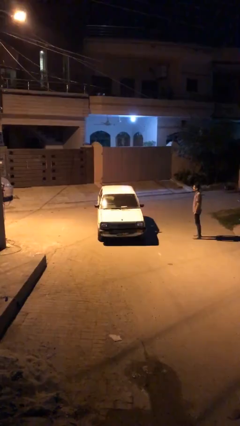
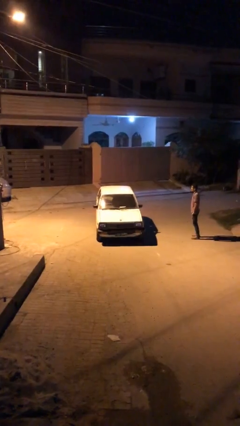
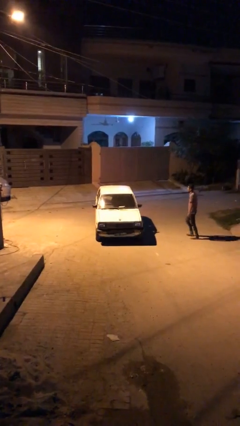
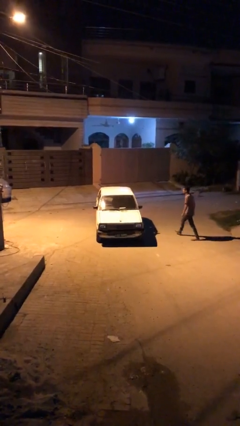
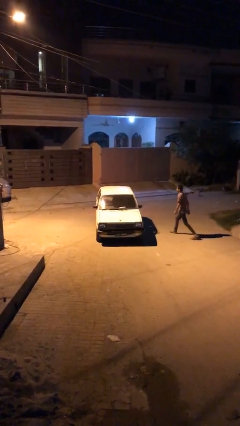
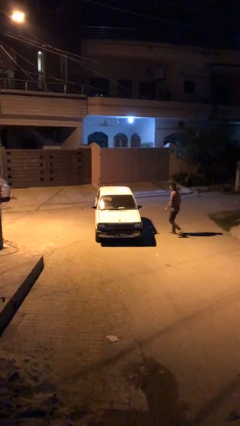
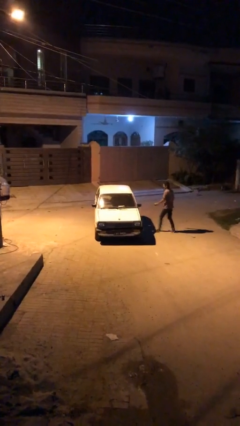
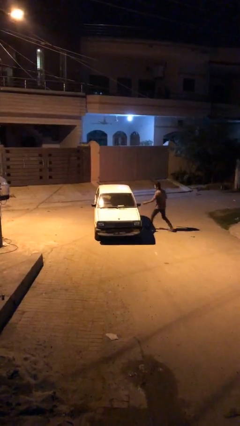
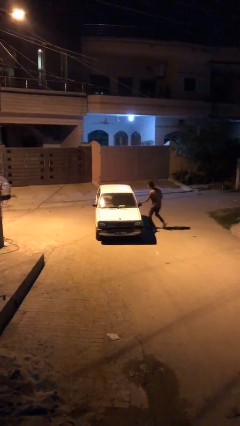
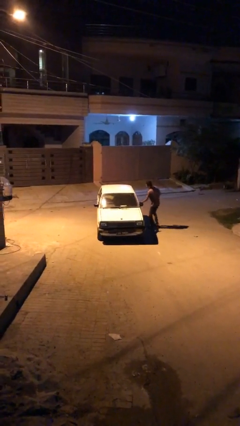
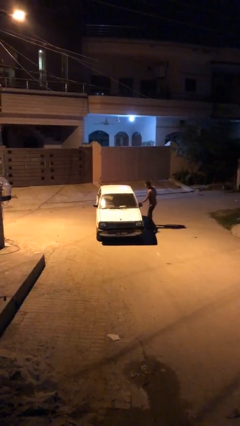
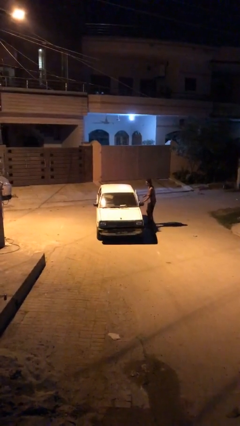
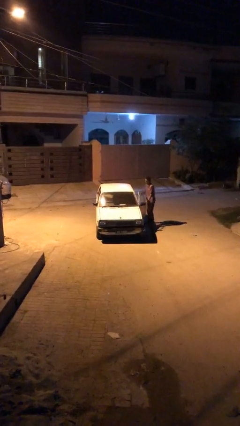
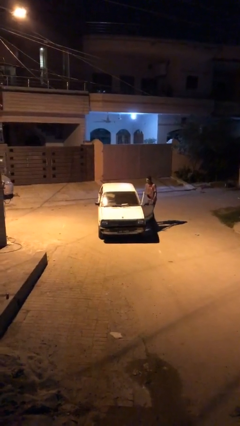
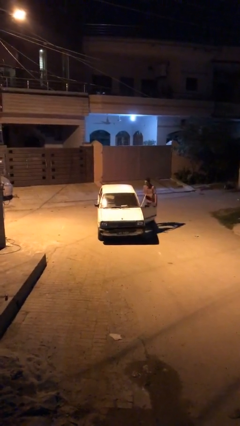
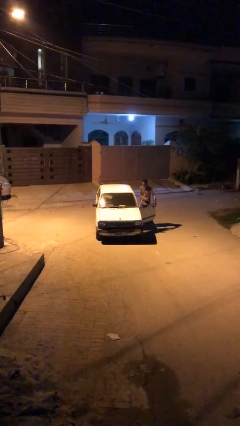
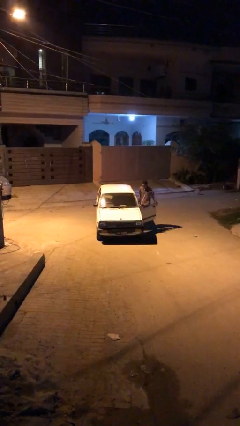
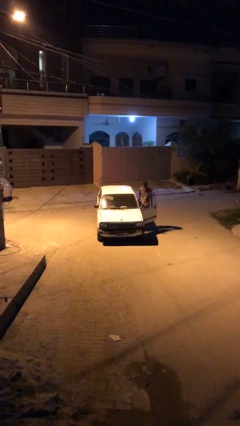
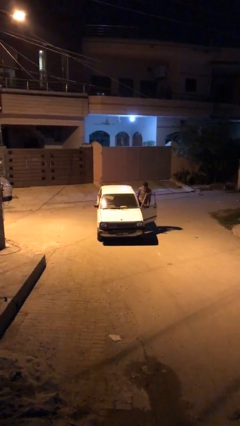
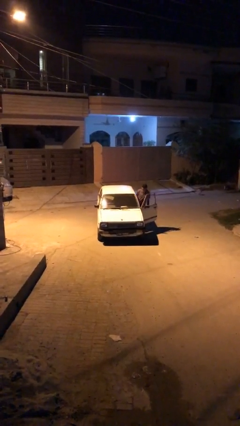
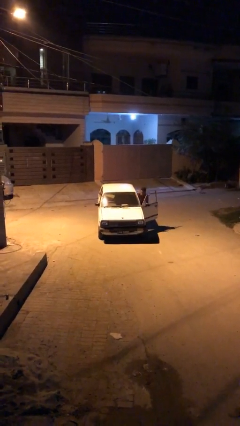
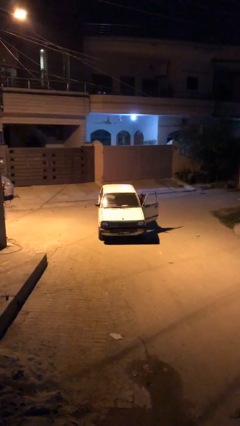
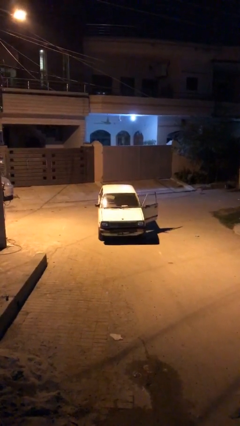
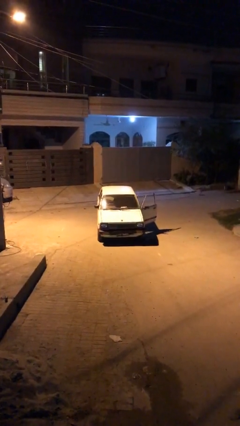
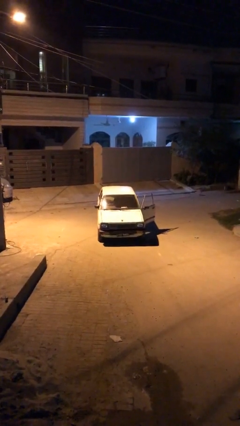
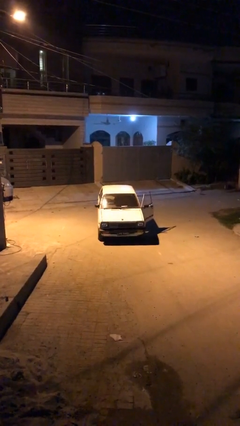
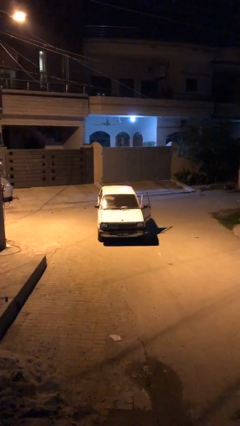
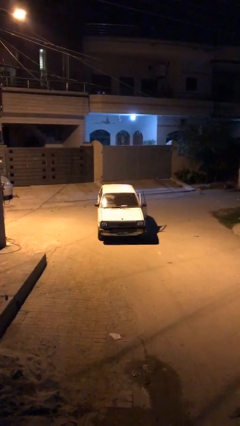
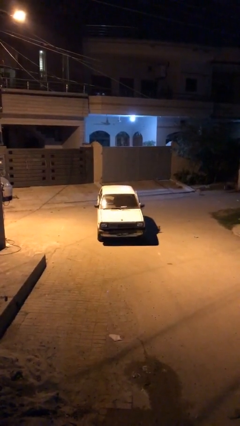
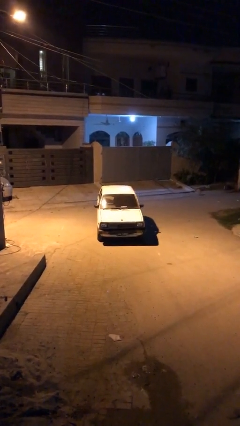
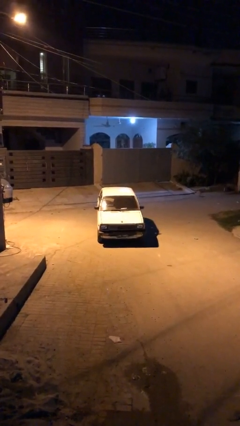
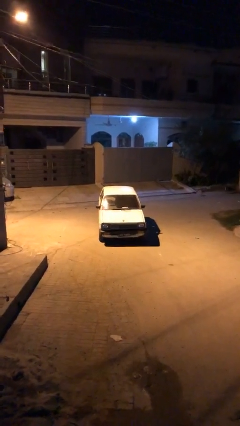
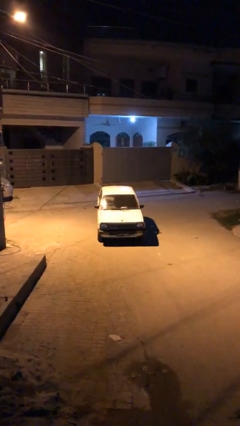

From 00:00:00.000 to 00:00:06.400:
car picks up person

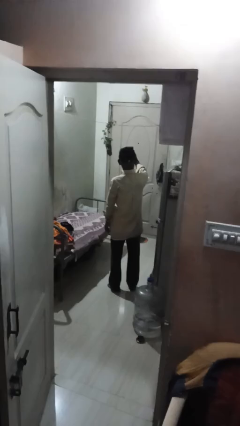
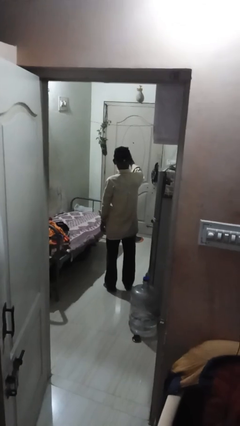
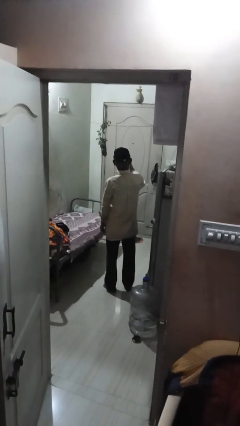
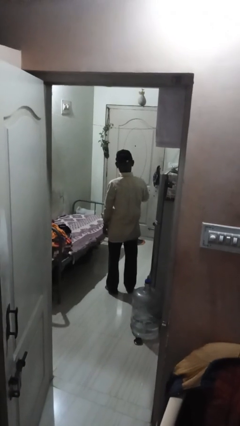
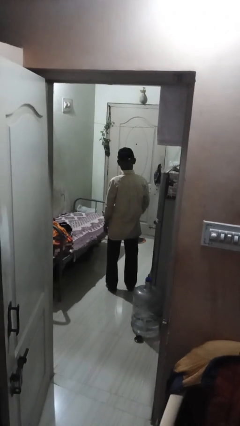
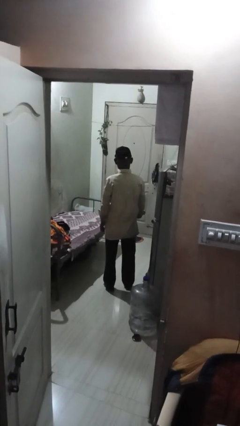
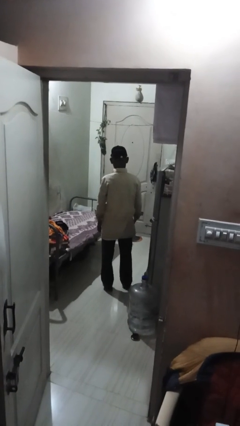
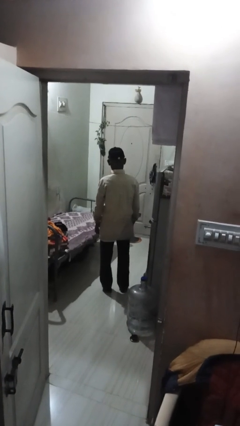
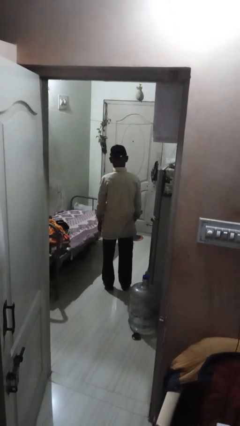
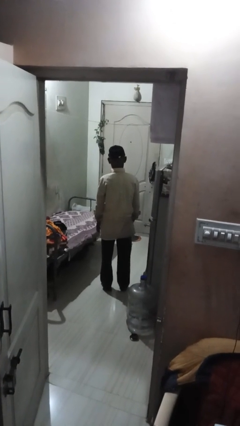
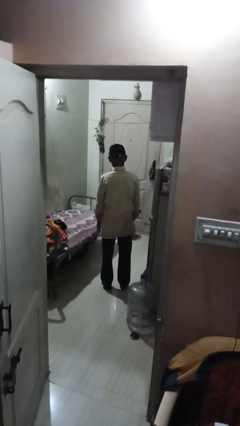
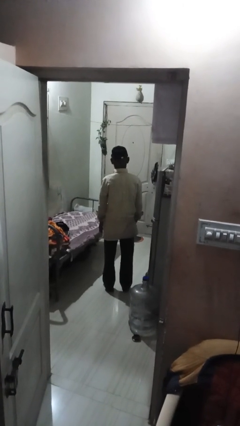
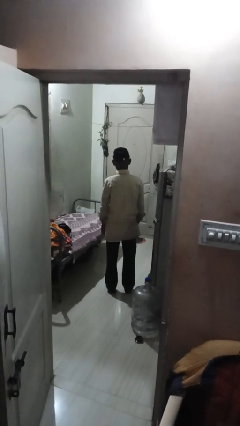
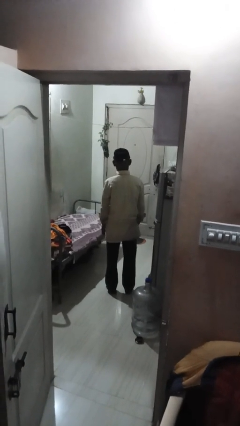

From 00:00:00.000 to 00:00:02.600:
person takes selfie

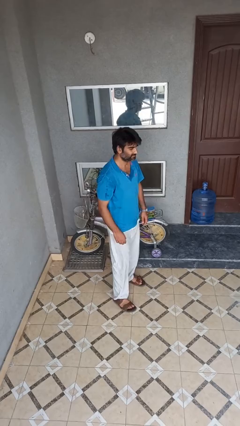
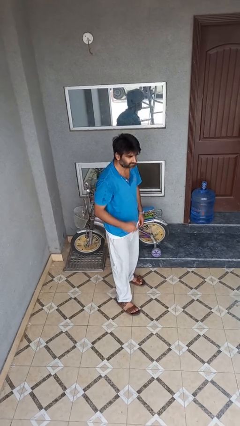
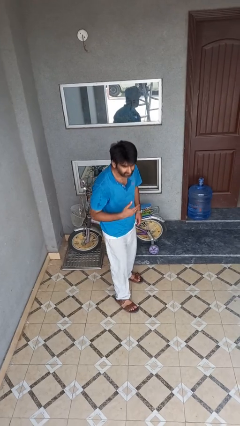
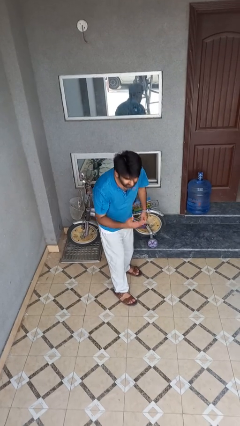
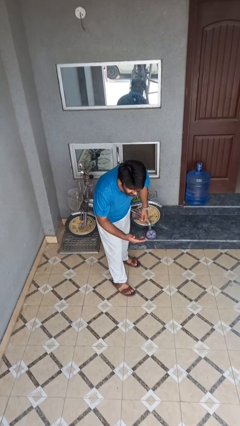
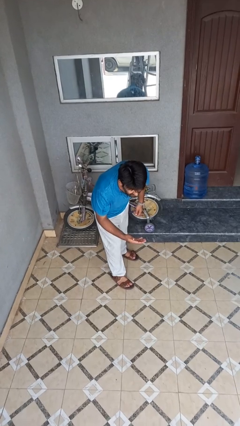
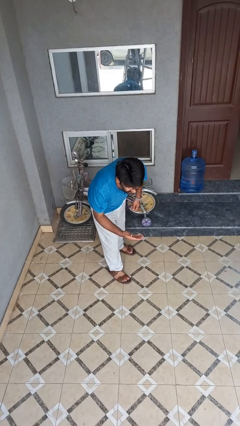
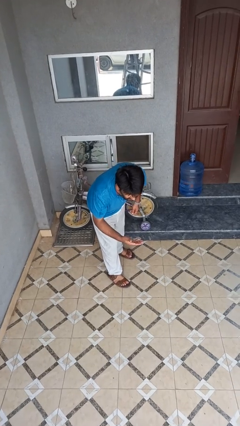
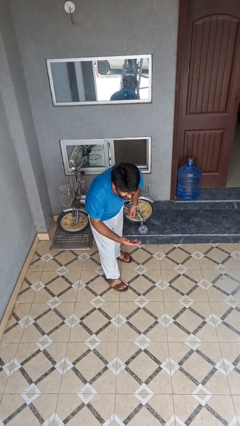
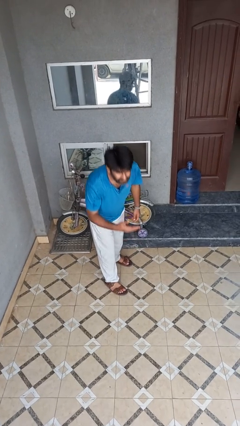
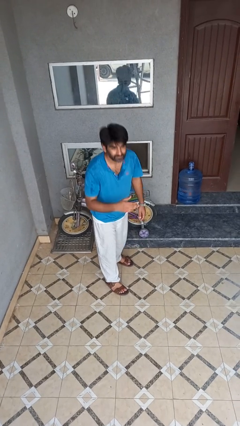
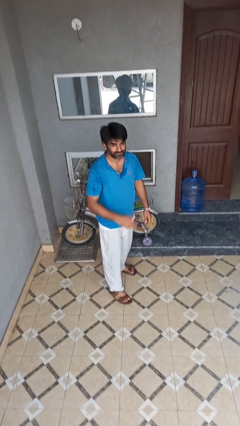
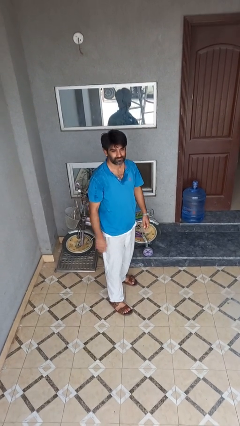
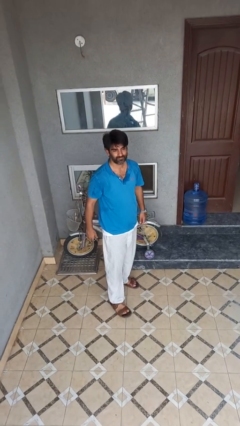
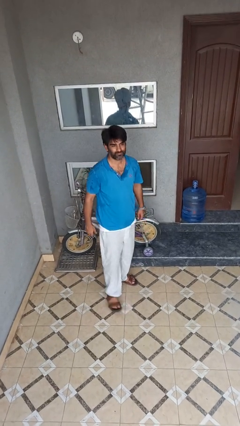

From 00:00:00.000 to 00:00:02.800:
person bows

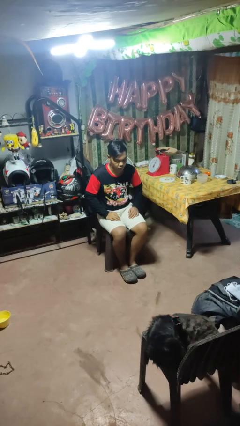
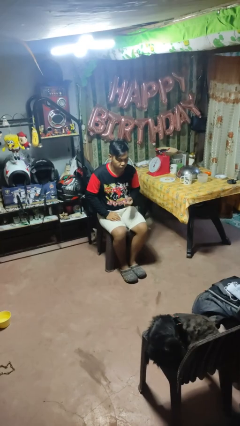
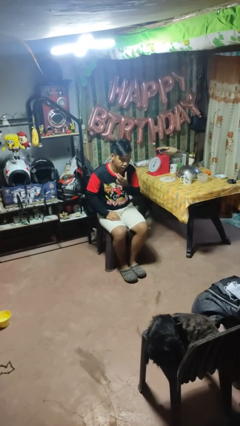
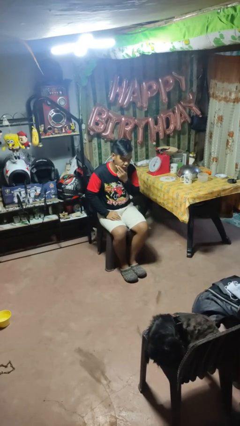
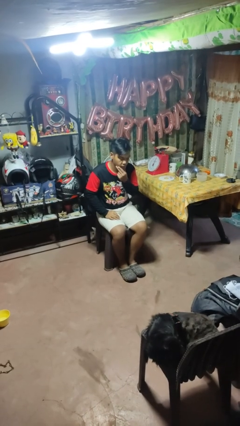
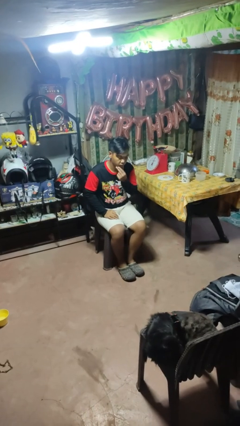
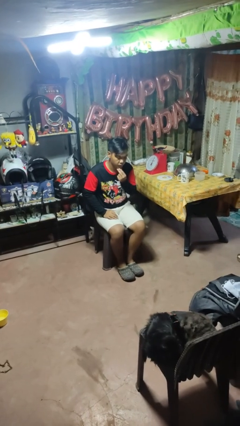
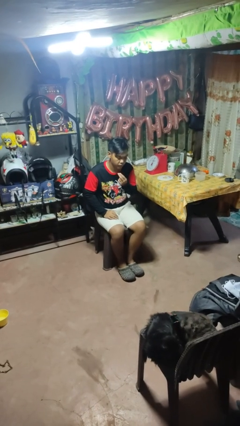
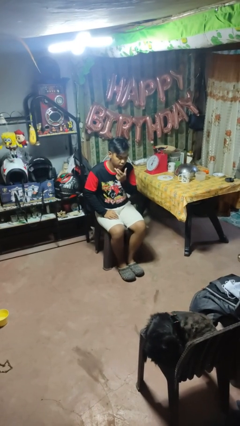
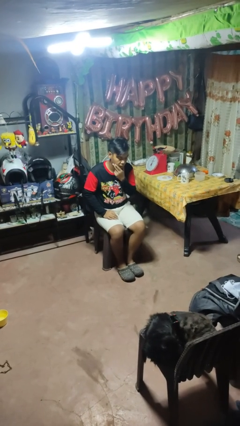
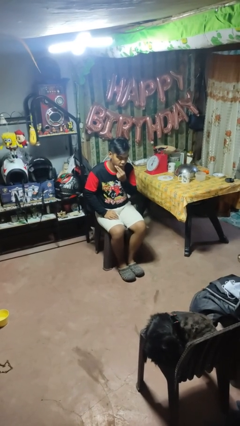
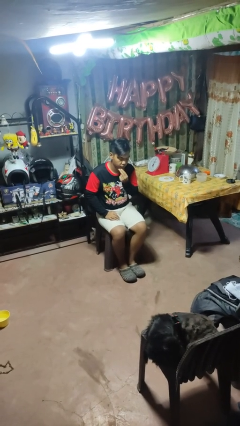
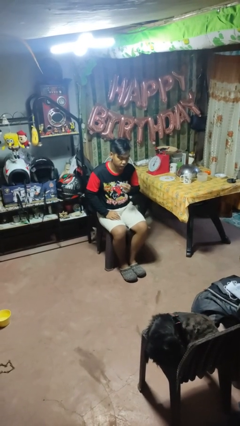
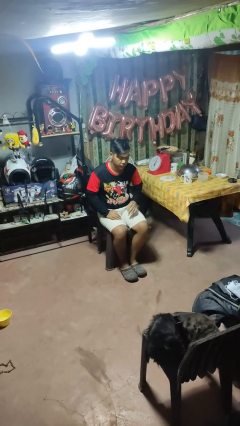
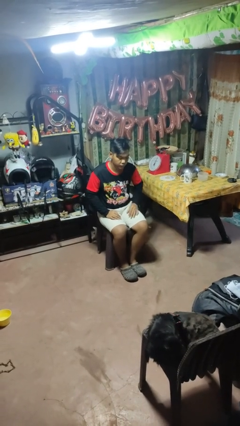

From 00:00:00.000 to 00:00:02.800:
person strokes chin

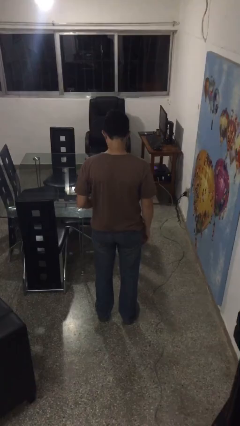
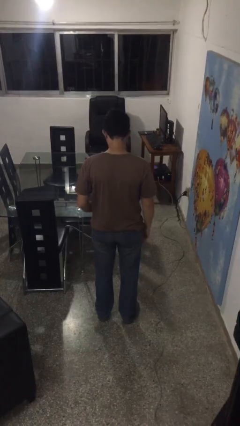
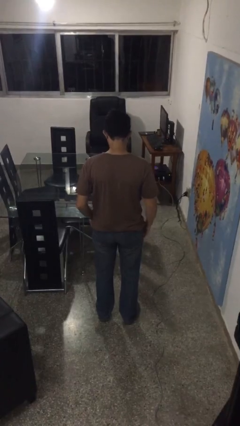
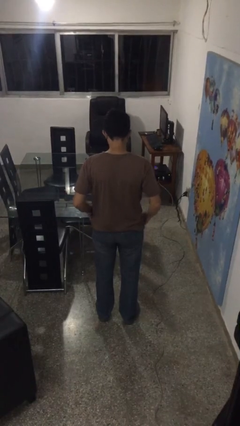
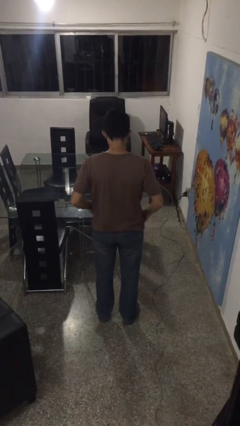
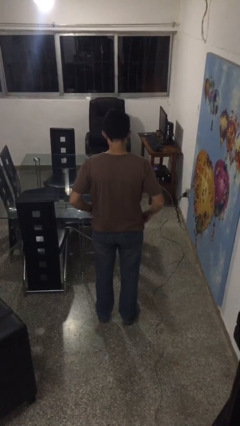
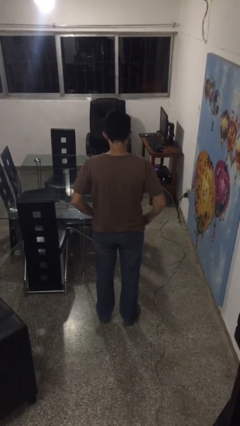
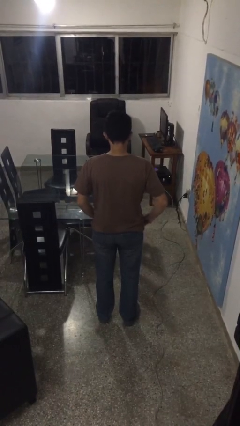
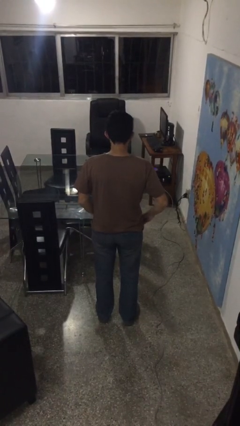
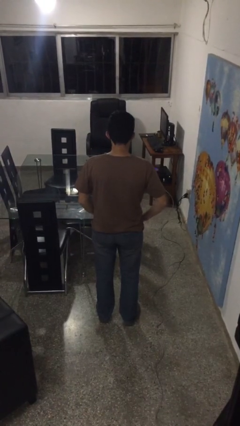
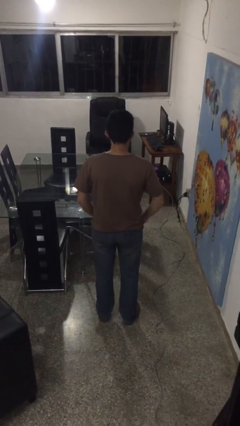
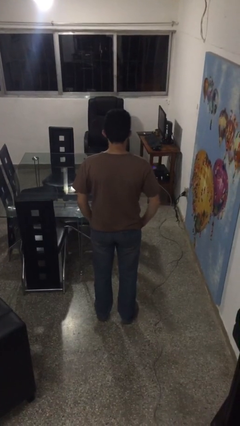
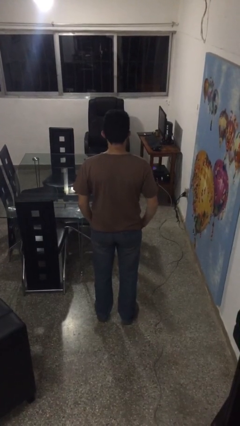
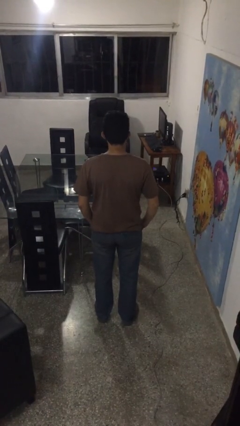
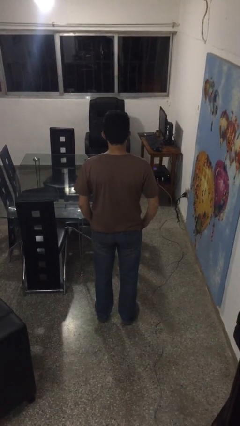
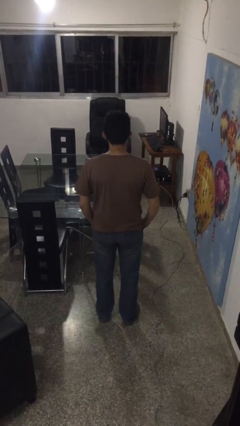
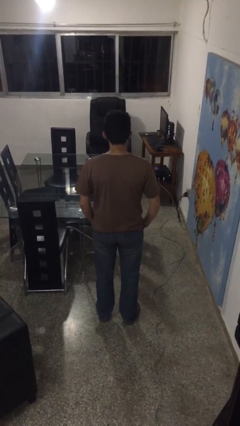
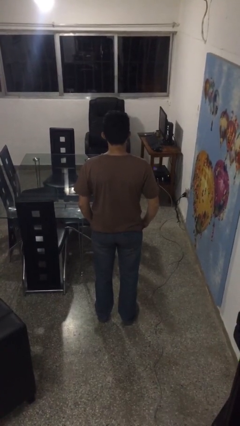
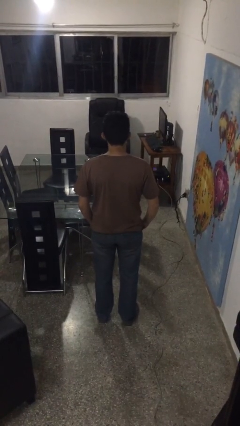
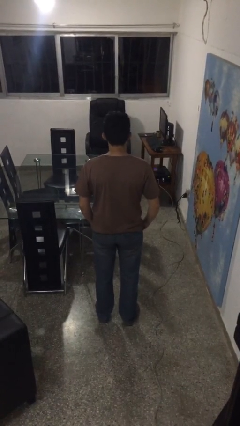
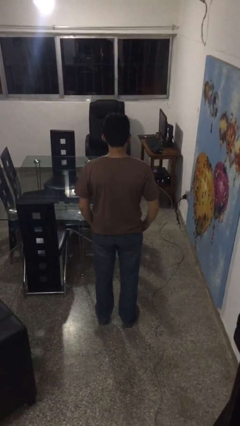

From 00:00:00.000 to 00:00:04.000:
person puts hands in back pockets
